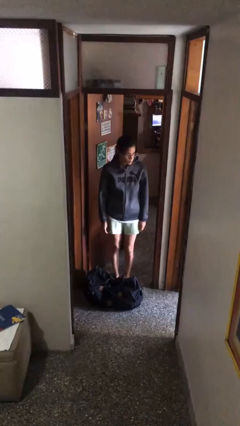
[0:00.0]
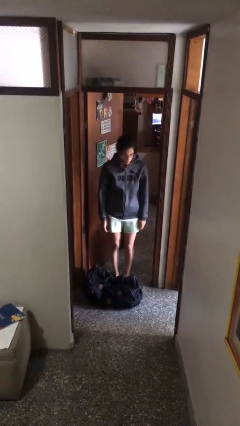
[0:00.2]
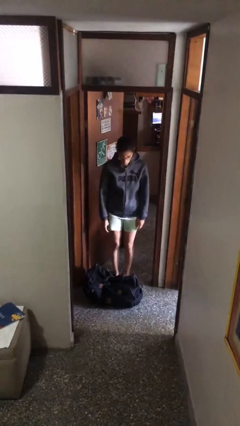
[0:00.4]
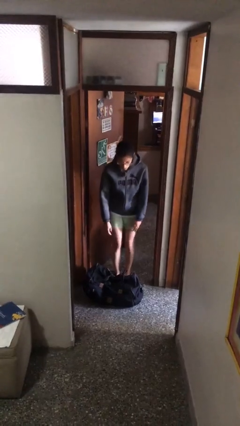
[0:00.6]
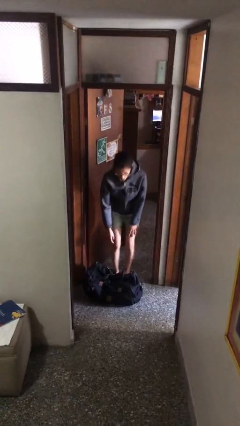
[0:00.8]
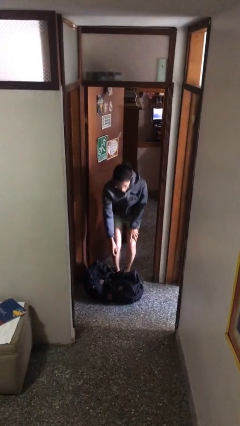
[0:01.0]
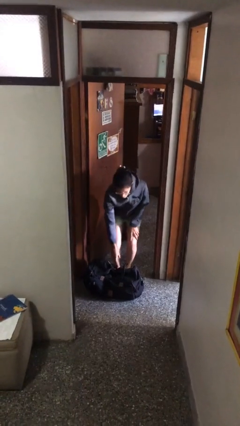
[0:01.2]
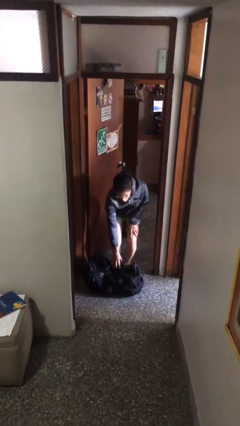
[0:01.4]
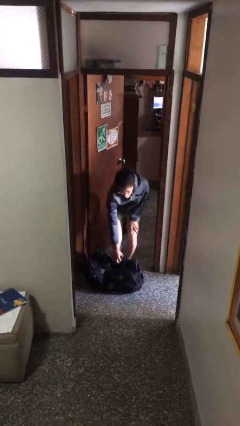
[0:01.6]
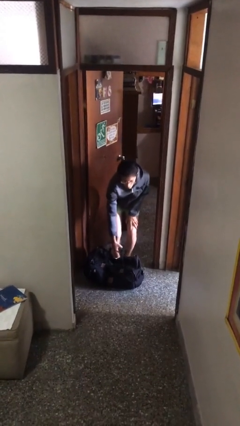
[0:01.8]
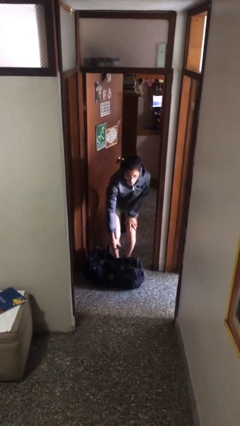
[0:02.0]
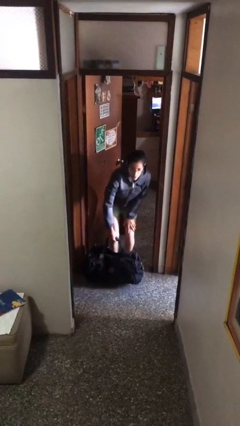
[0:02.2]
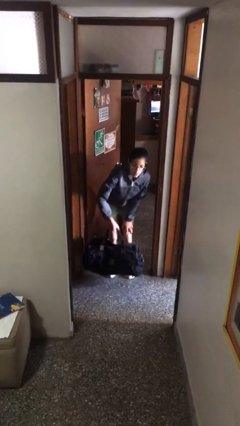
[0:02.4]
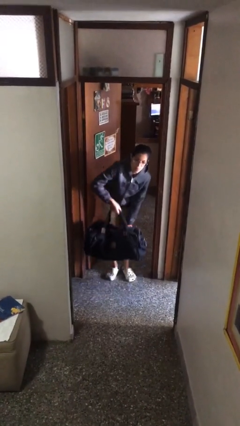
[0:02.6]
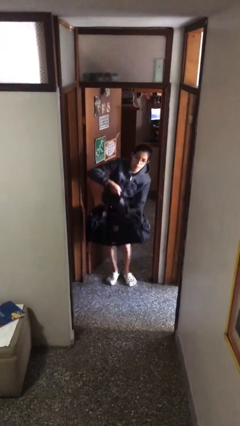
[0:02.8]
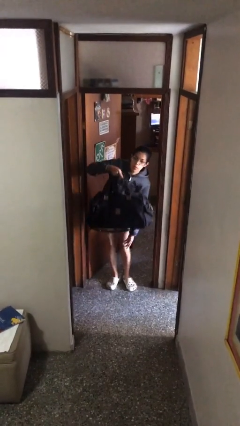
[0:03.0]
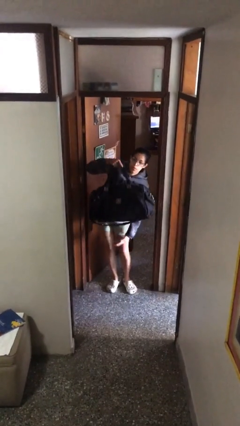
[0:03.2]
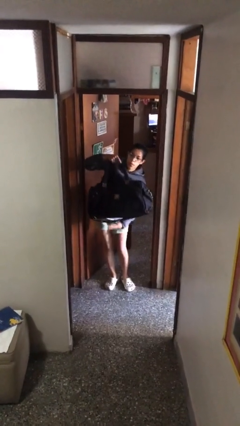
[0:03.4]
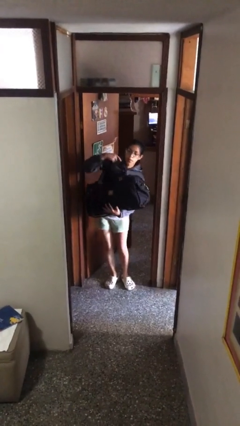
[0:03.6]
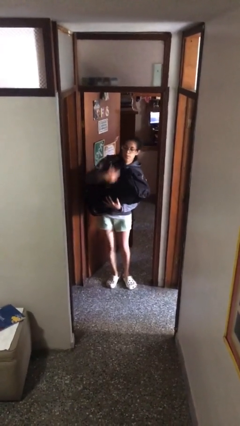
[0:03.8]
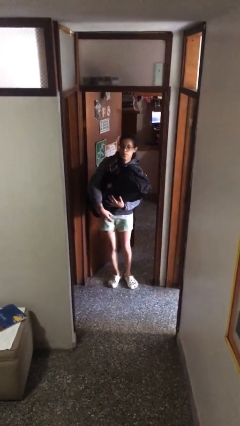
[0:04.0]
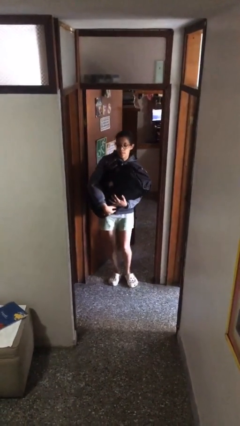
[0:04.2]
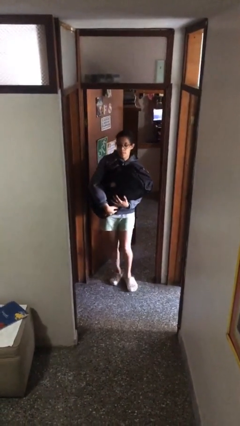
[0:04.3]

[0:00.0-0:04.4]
person picks up object from floor

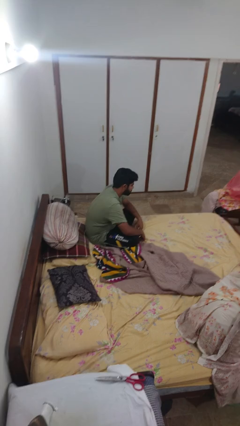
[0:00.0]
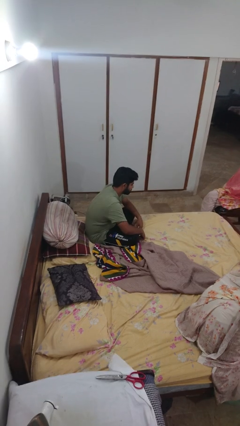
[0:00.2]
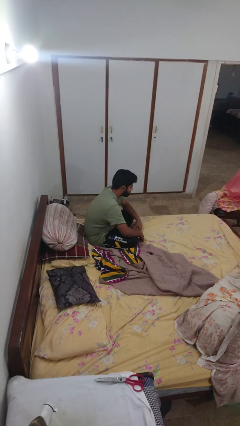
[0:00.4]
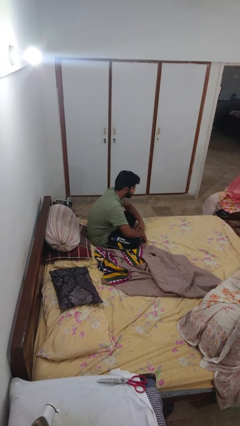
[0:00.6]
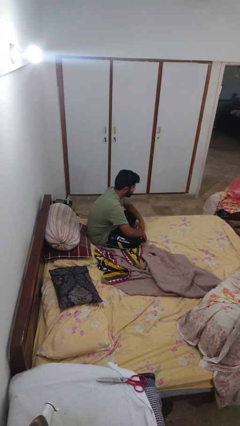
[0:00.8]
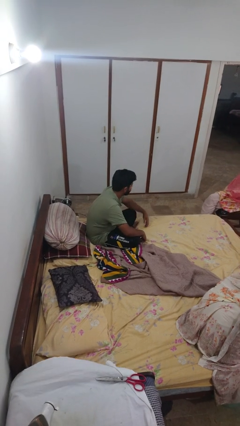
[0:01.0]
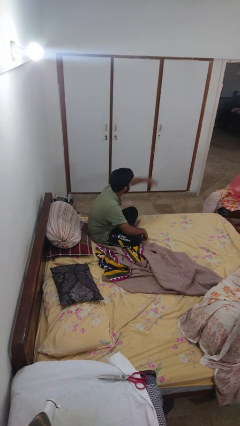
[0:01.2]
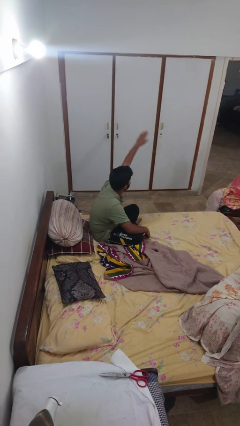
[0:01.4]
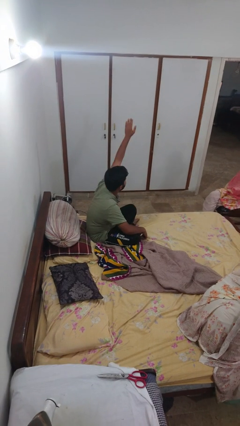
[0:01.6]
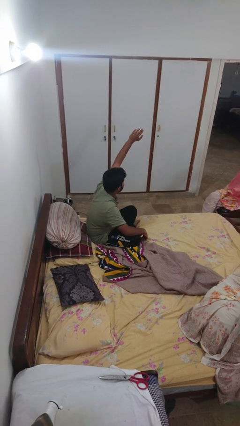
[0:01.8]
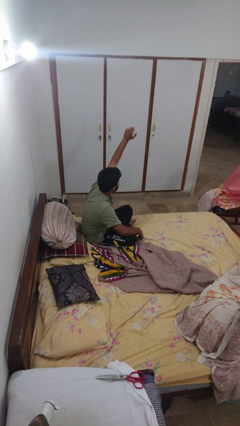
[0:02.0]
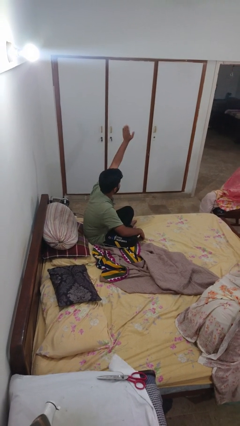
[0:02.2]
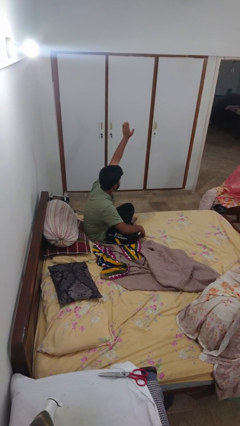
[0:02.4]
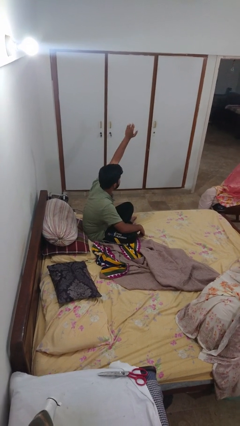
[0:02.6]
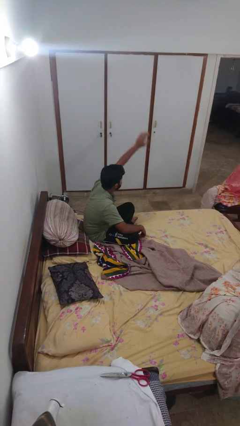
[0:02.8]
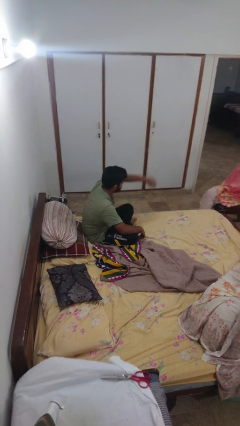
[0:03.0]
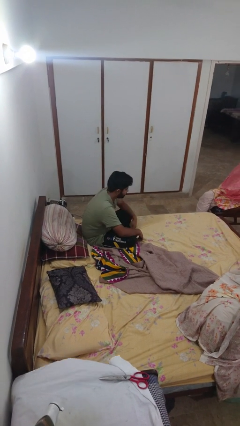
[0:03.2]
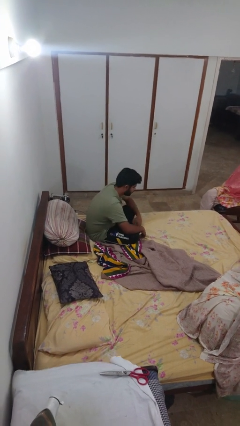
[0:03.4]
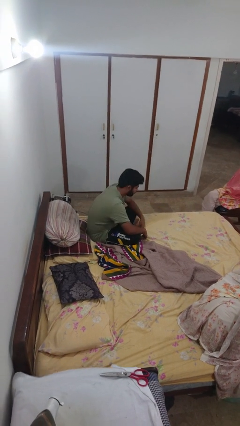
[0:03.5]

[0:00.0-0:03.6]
person waves at person

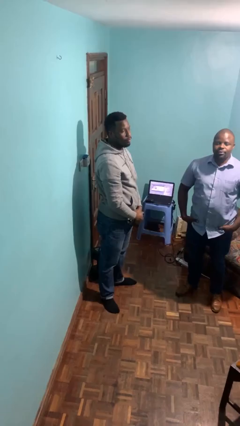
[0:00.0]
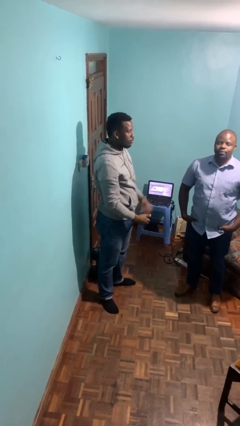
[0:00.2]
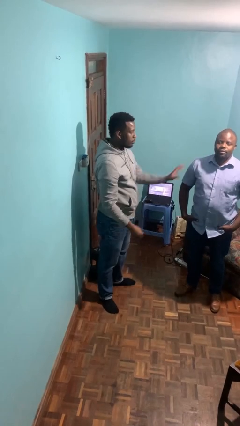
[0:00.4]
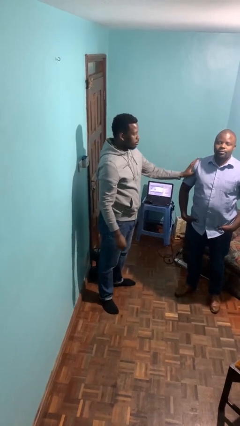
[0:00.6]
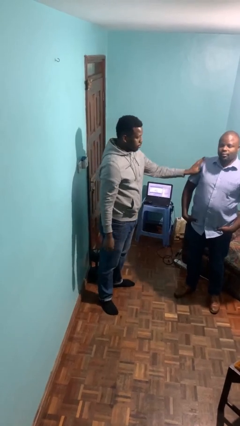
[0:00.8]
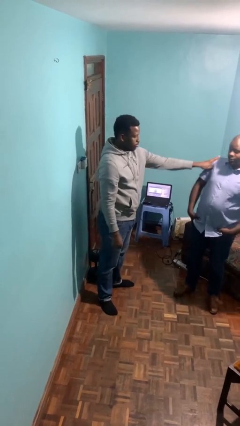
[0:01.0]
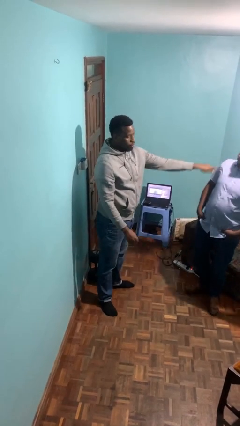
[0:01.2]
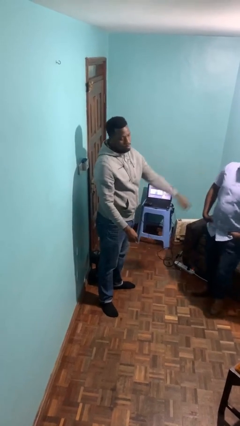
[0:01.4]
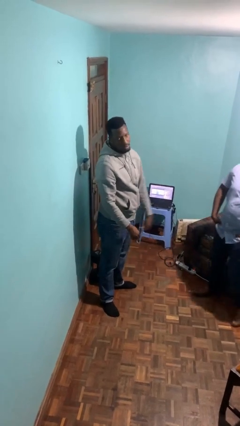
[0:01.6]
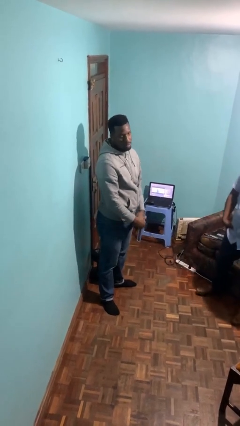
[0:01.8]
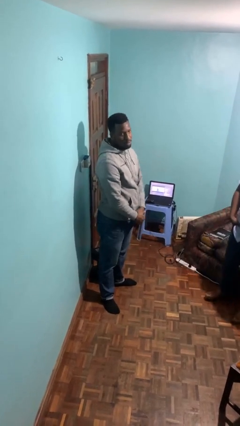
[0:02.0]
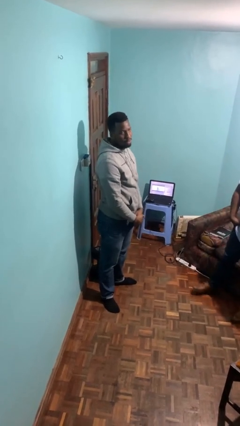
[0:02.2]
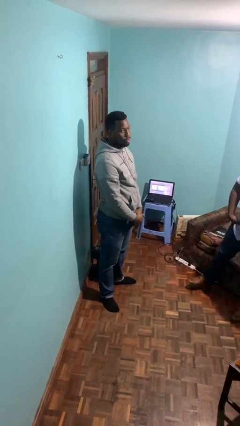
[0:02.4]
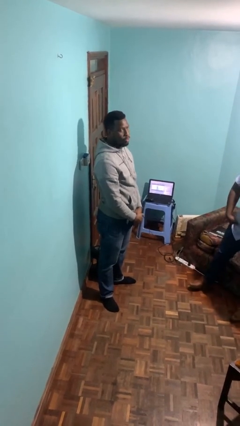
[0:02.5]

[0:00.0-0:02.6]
person shoves person

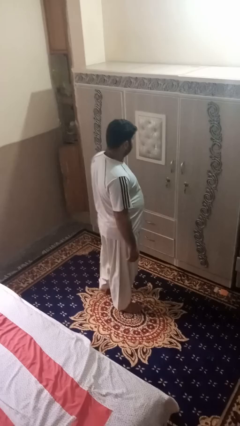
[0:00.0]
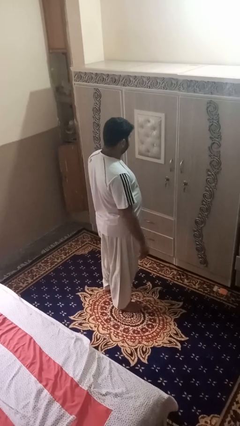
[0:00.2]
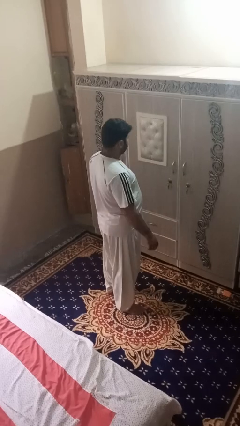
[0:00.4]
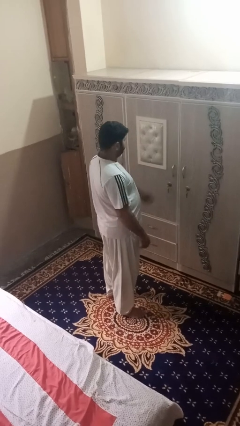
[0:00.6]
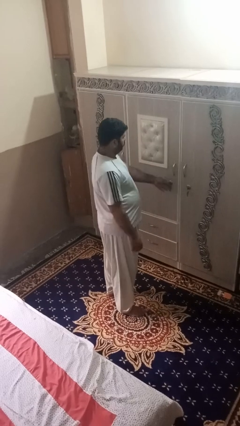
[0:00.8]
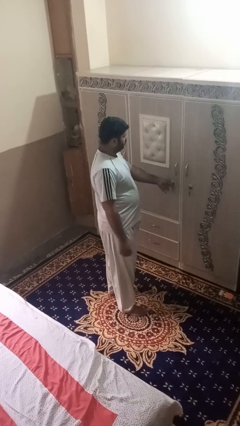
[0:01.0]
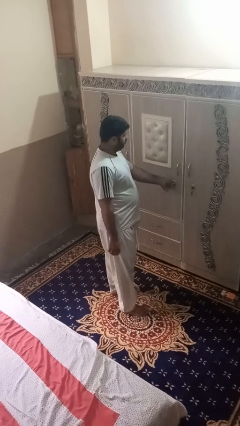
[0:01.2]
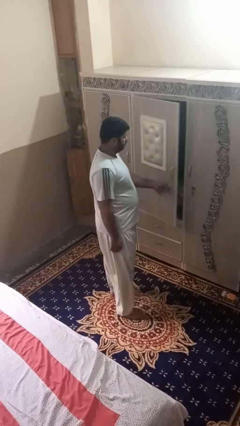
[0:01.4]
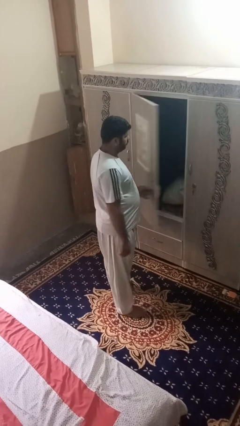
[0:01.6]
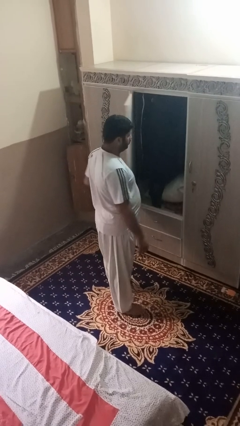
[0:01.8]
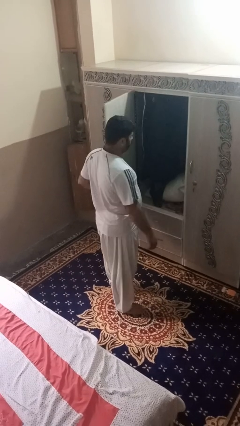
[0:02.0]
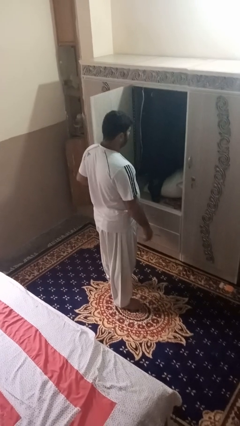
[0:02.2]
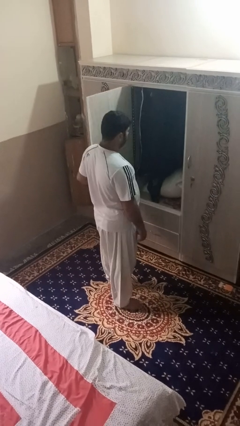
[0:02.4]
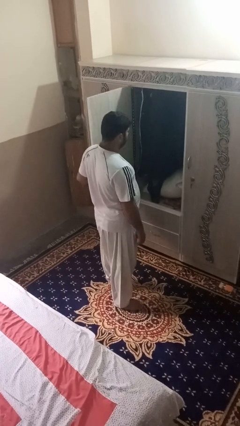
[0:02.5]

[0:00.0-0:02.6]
person opens dresser drawer

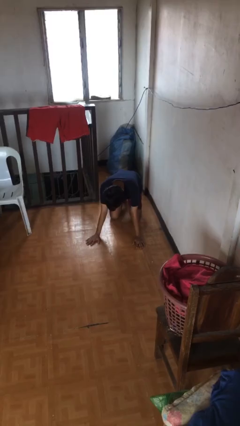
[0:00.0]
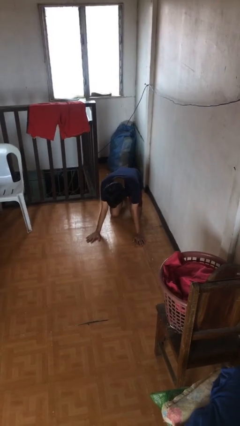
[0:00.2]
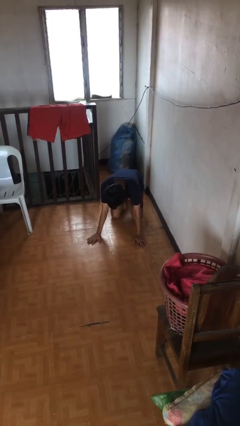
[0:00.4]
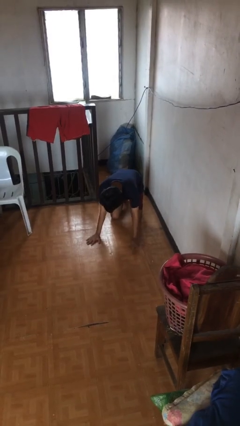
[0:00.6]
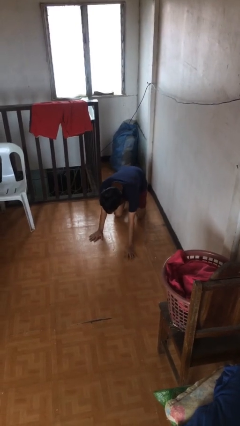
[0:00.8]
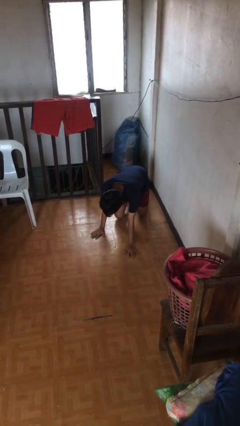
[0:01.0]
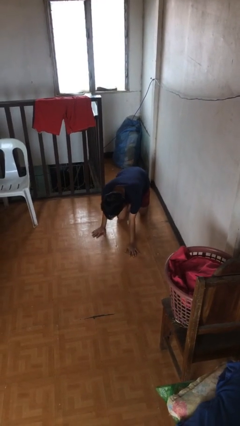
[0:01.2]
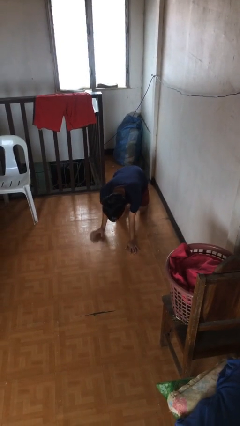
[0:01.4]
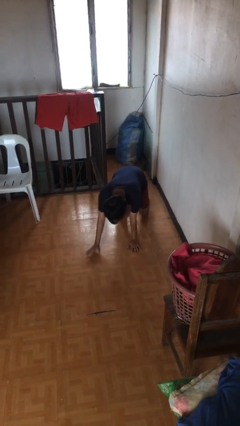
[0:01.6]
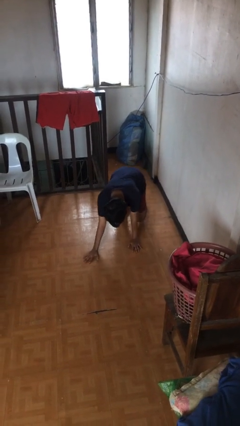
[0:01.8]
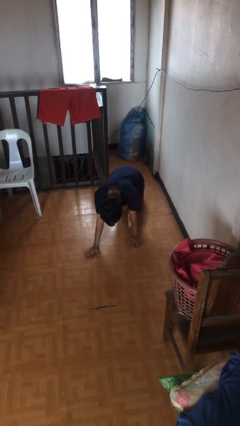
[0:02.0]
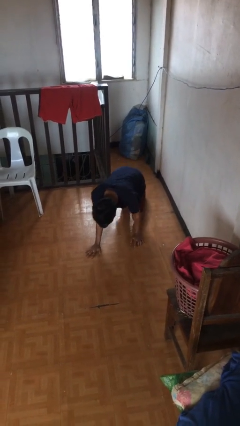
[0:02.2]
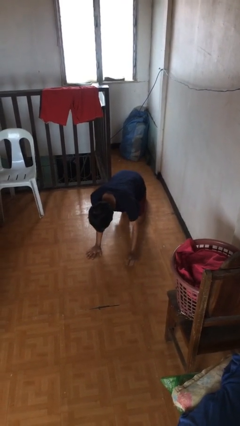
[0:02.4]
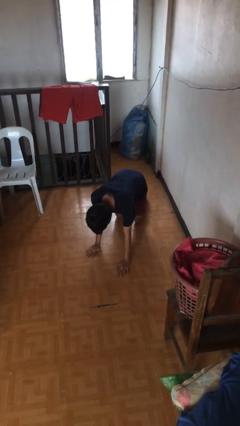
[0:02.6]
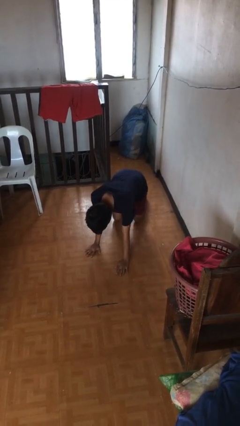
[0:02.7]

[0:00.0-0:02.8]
person crawls

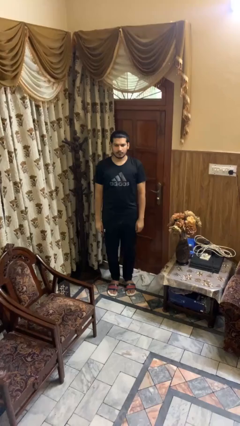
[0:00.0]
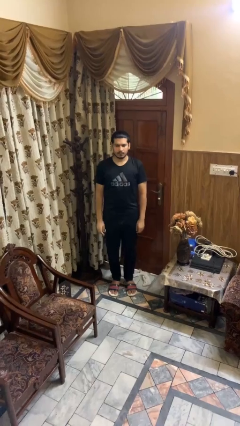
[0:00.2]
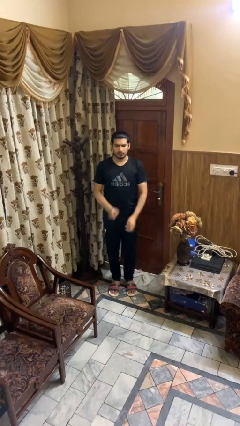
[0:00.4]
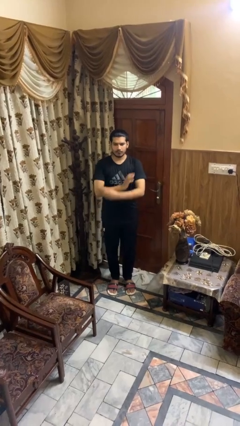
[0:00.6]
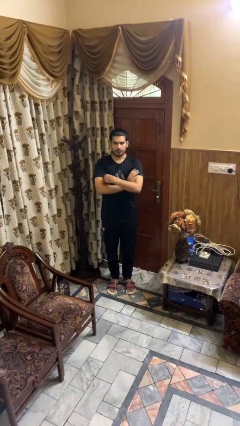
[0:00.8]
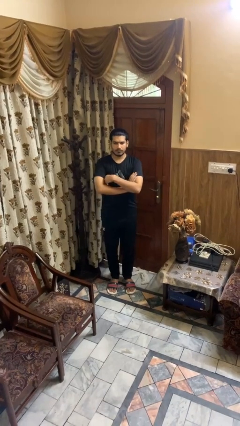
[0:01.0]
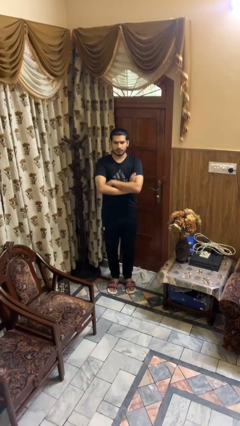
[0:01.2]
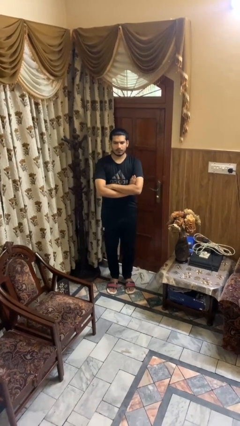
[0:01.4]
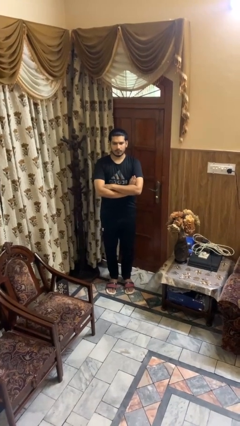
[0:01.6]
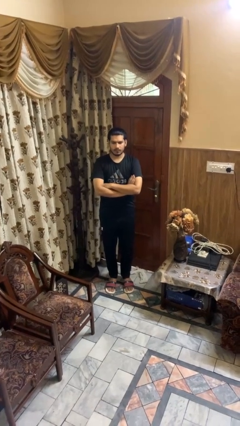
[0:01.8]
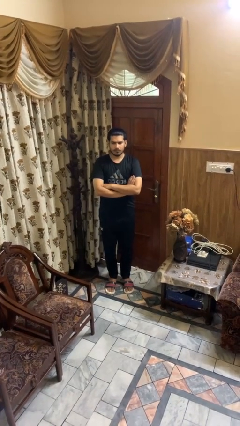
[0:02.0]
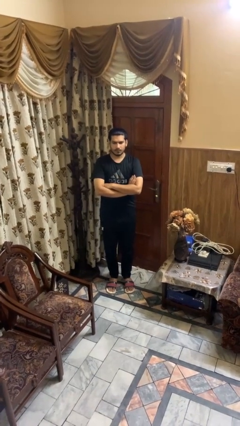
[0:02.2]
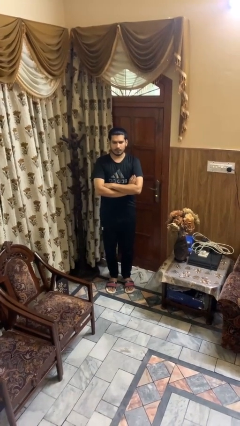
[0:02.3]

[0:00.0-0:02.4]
person crosses arms
